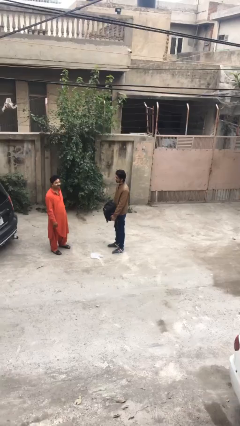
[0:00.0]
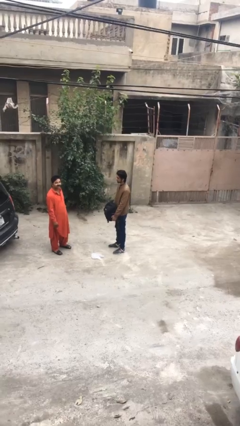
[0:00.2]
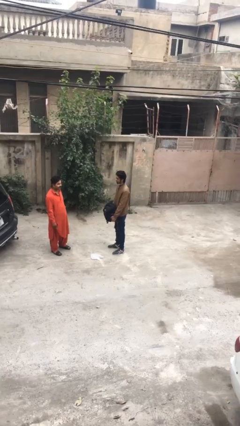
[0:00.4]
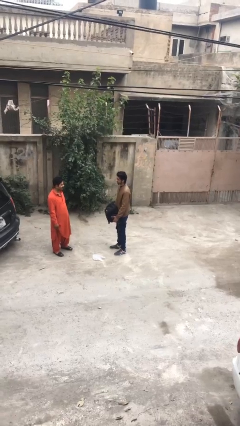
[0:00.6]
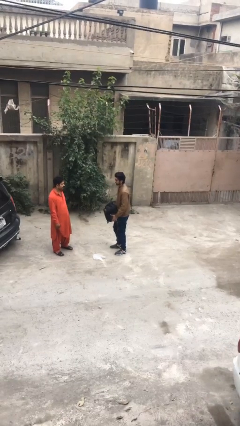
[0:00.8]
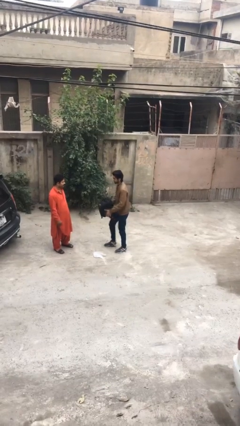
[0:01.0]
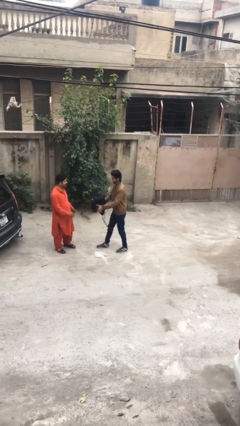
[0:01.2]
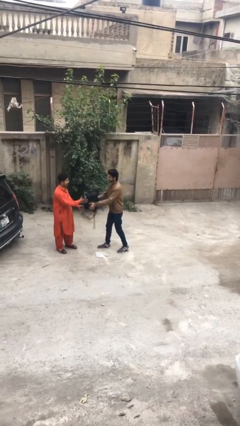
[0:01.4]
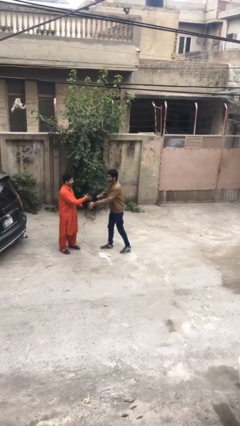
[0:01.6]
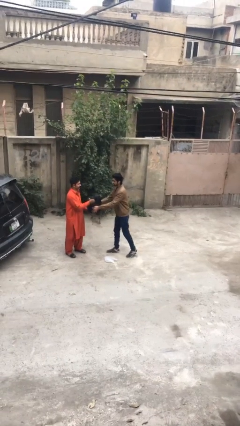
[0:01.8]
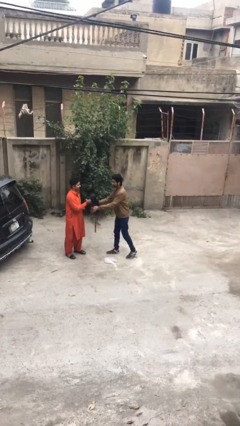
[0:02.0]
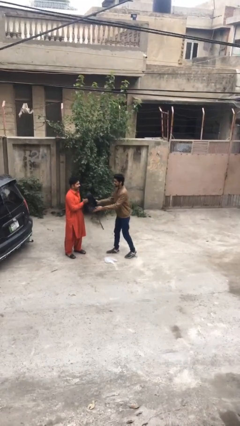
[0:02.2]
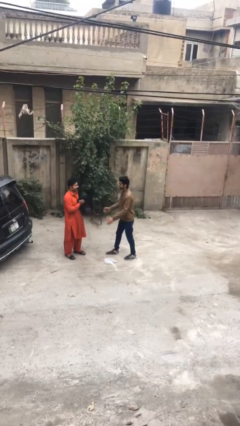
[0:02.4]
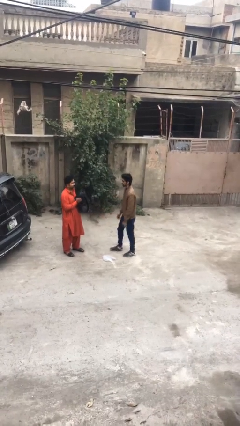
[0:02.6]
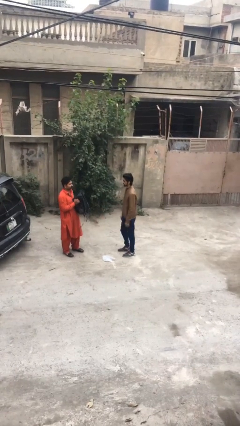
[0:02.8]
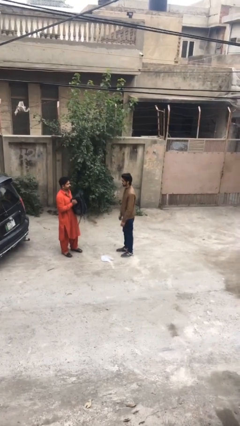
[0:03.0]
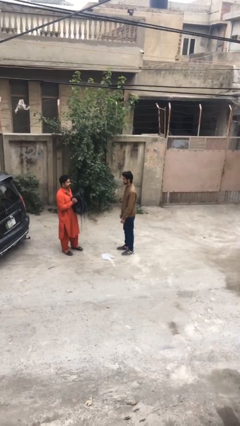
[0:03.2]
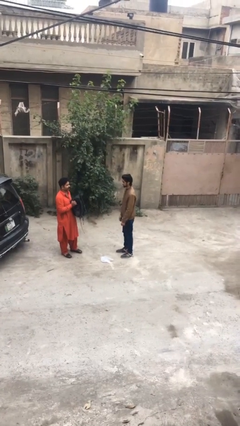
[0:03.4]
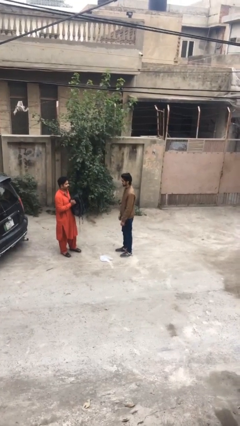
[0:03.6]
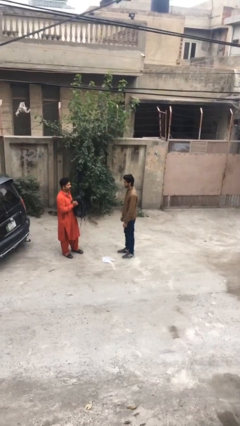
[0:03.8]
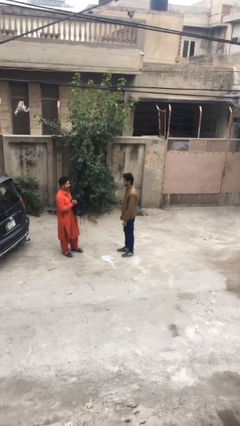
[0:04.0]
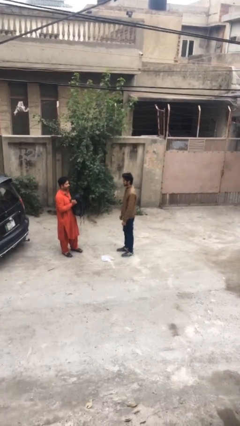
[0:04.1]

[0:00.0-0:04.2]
person transfers object to person

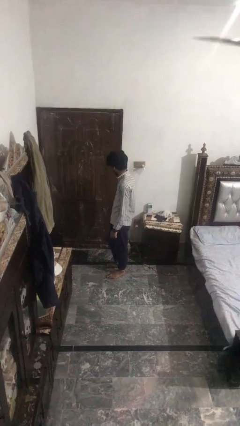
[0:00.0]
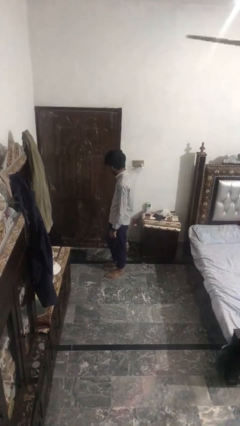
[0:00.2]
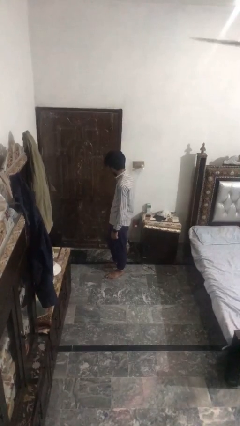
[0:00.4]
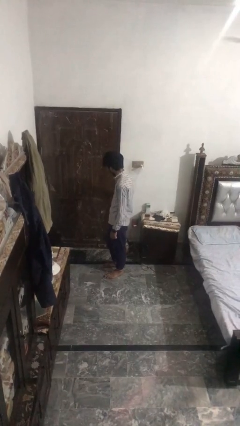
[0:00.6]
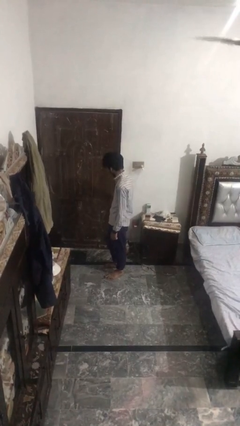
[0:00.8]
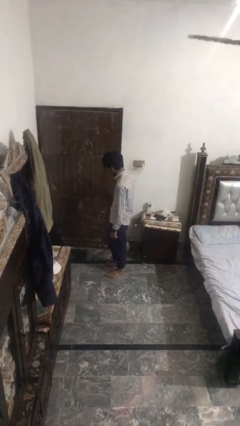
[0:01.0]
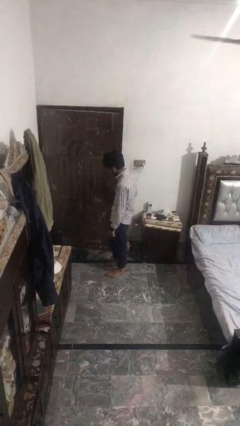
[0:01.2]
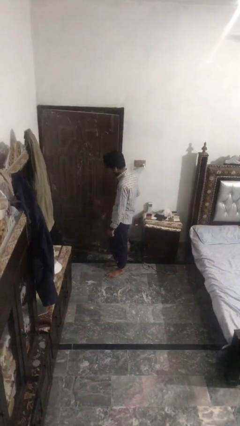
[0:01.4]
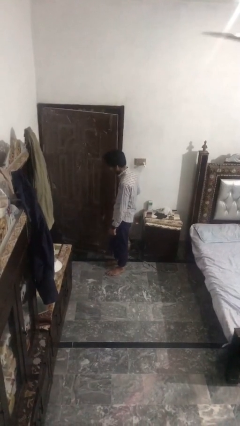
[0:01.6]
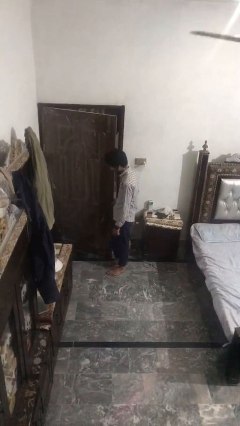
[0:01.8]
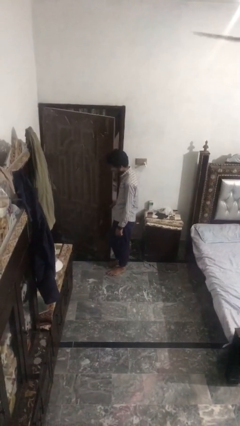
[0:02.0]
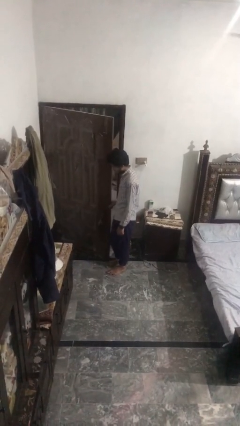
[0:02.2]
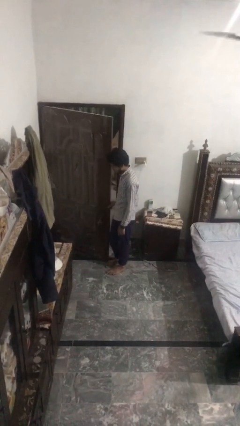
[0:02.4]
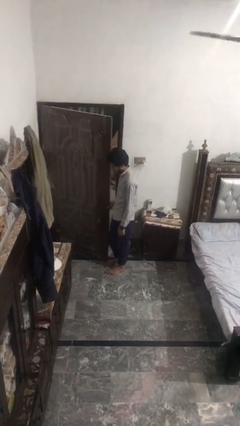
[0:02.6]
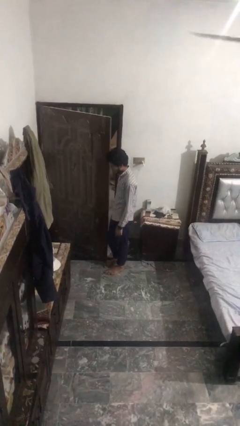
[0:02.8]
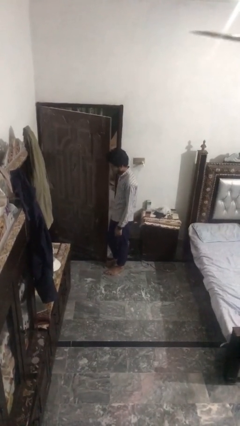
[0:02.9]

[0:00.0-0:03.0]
person opens facility door

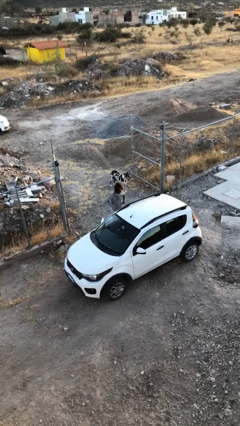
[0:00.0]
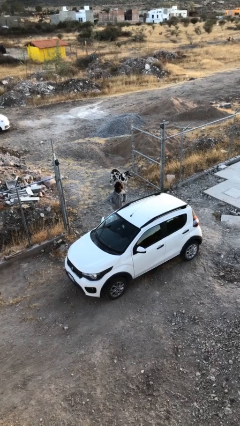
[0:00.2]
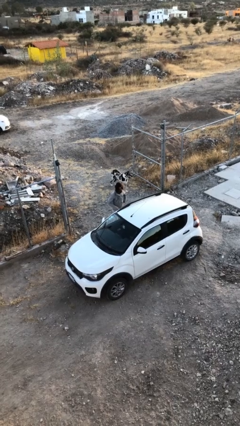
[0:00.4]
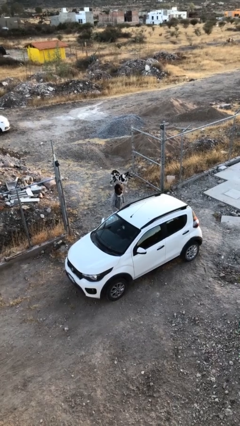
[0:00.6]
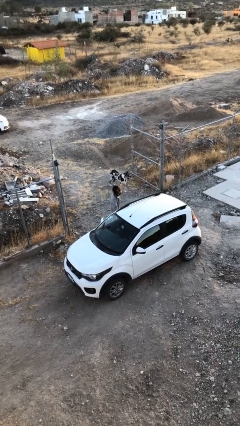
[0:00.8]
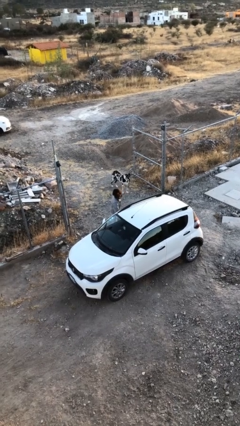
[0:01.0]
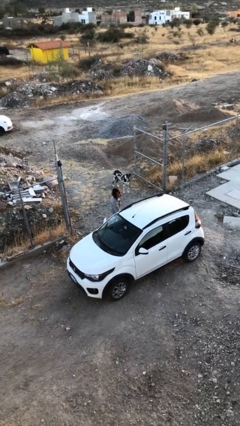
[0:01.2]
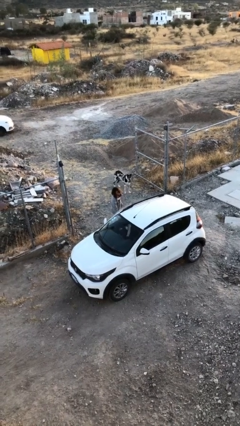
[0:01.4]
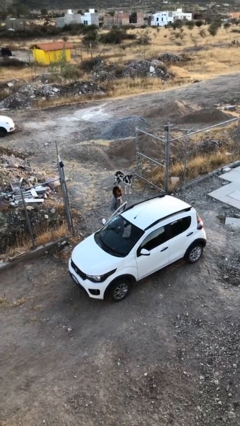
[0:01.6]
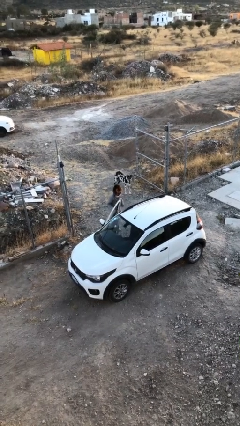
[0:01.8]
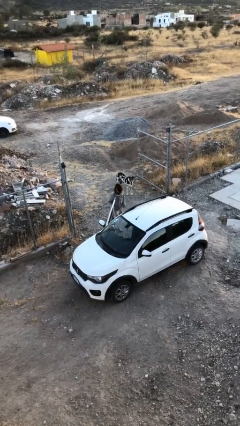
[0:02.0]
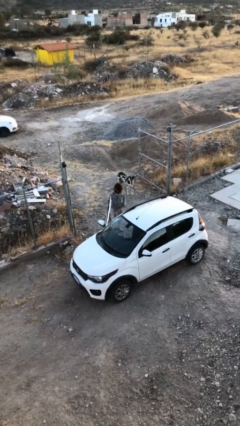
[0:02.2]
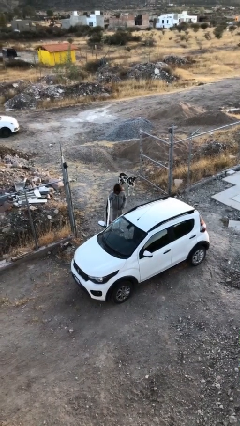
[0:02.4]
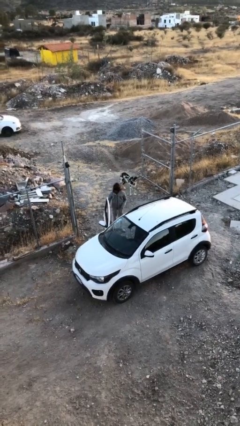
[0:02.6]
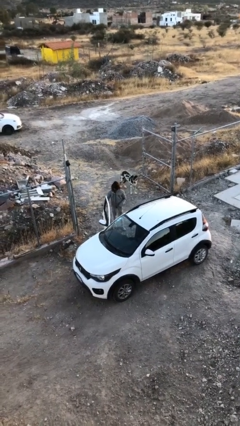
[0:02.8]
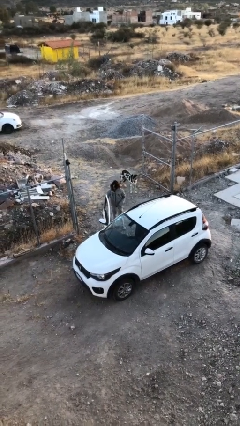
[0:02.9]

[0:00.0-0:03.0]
person opens car door

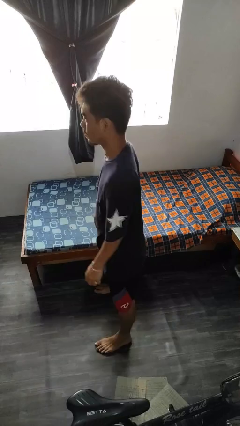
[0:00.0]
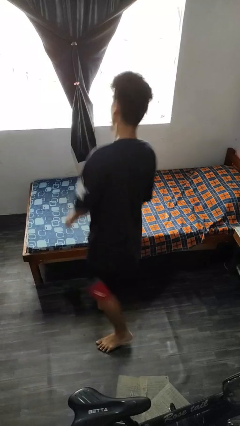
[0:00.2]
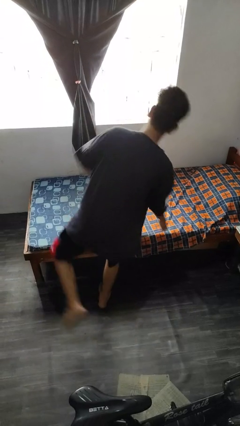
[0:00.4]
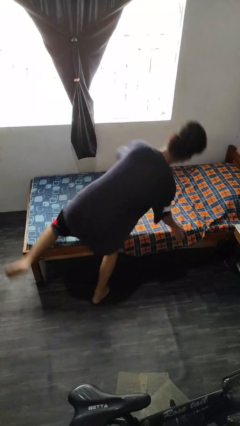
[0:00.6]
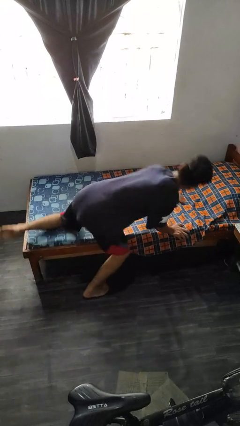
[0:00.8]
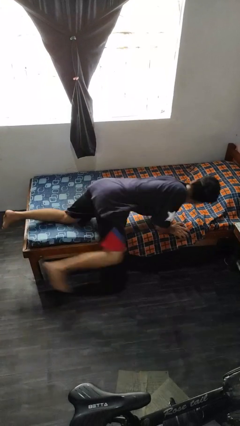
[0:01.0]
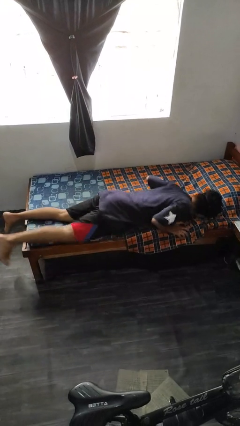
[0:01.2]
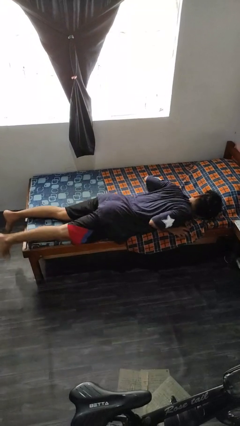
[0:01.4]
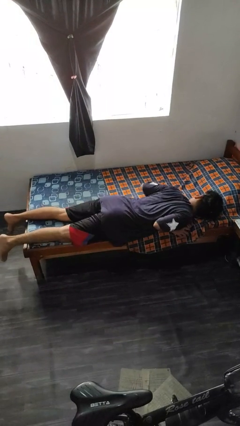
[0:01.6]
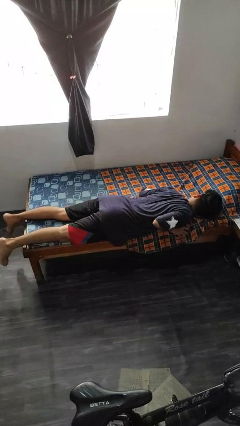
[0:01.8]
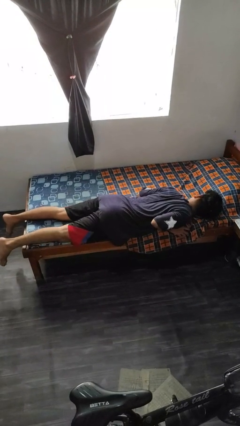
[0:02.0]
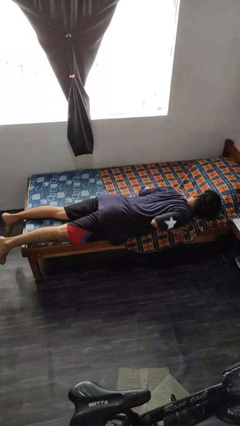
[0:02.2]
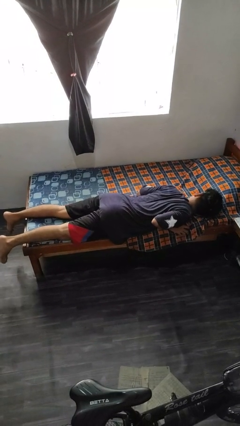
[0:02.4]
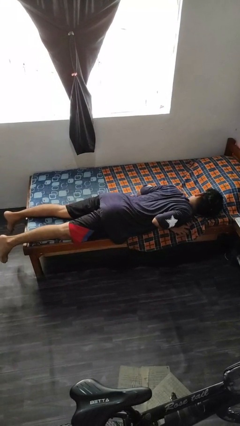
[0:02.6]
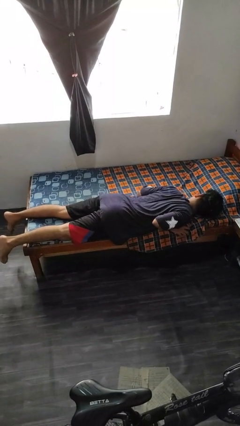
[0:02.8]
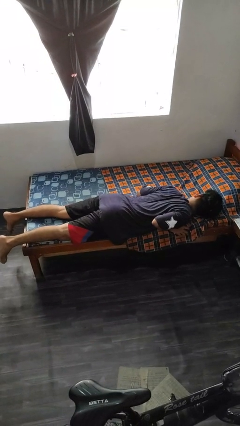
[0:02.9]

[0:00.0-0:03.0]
person lies down on bed

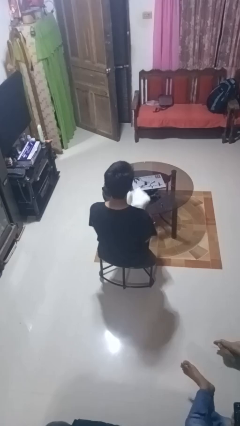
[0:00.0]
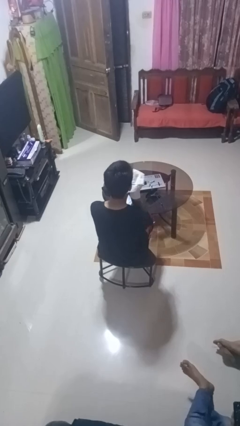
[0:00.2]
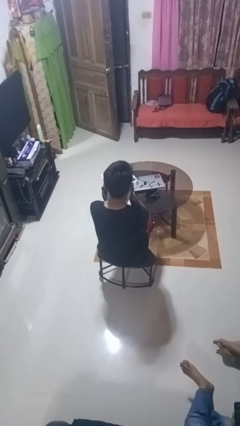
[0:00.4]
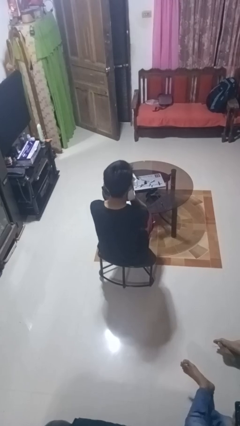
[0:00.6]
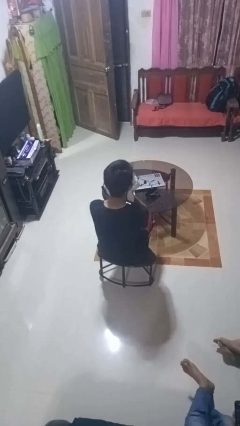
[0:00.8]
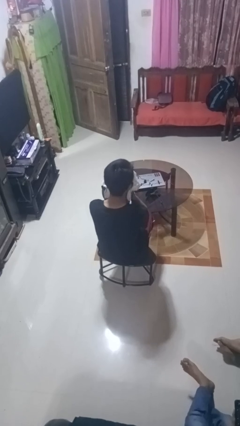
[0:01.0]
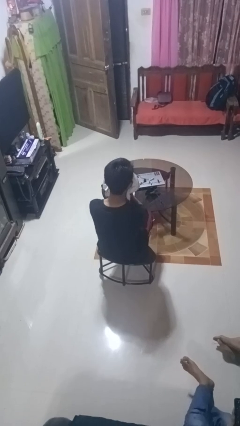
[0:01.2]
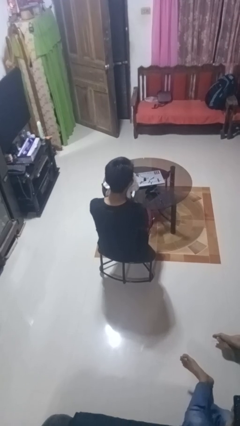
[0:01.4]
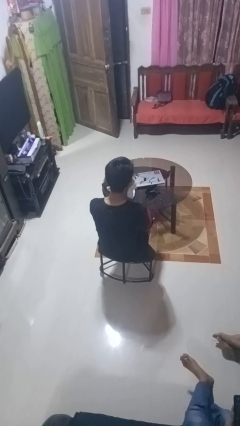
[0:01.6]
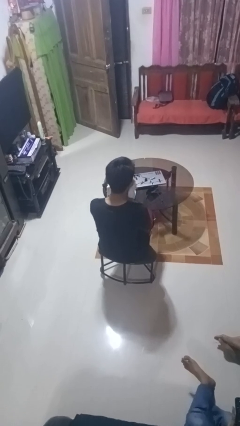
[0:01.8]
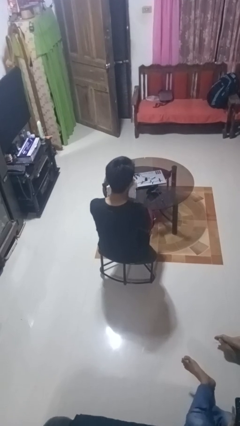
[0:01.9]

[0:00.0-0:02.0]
person wipes mouth with napkin

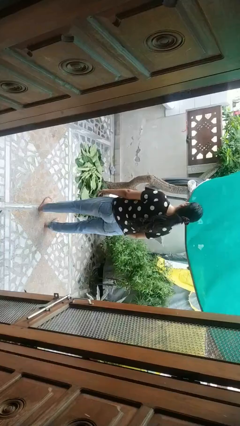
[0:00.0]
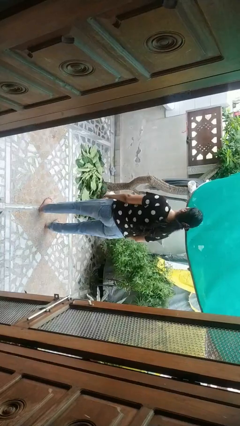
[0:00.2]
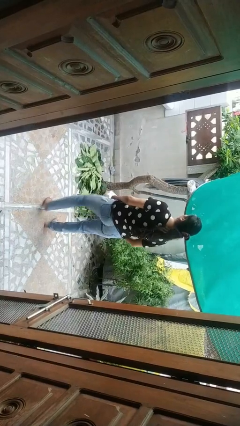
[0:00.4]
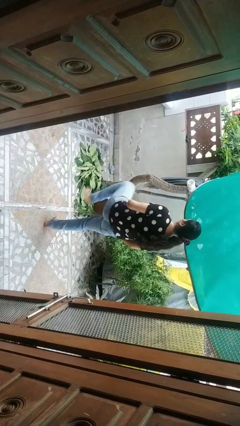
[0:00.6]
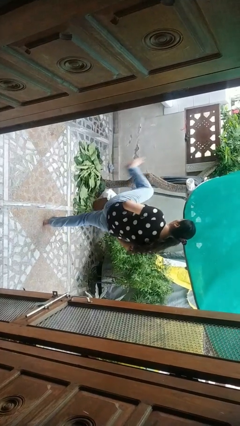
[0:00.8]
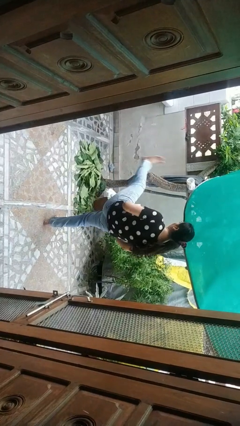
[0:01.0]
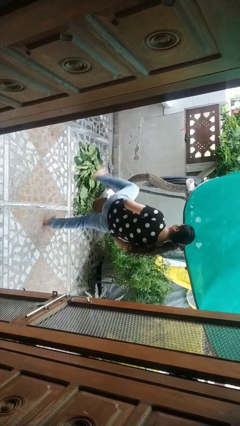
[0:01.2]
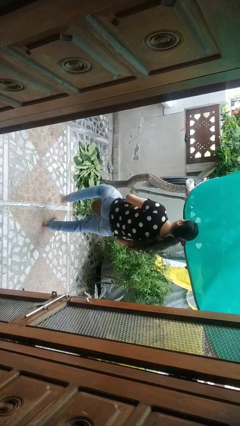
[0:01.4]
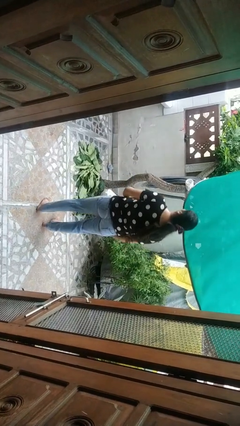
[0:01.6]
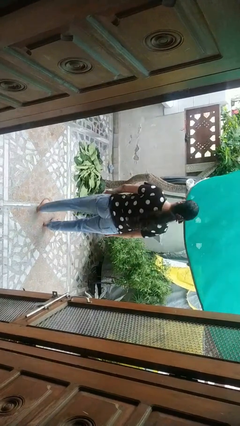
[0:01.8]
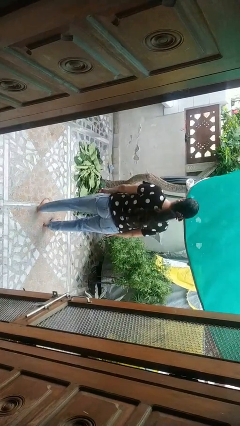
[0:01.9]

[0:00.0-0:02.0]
person karate kicks
